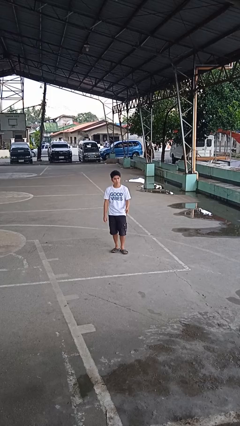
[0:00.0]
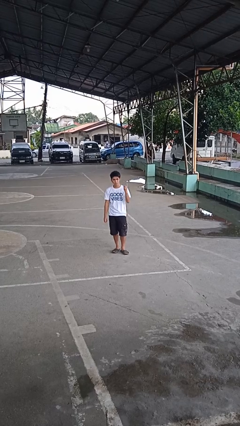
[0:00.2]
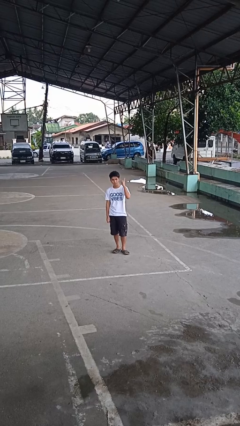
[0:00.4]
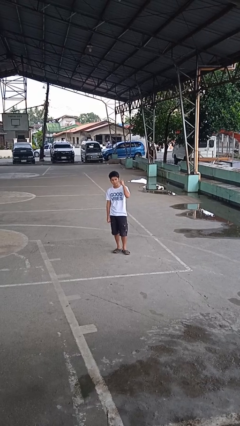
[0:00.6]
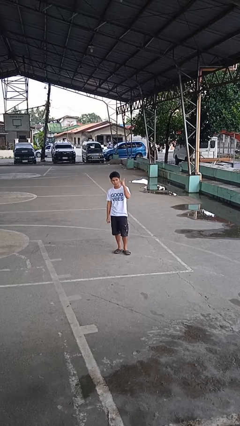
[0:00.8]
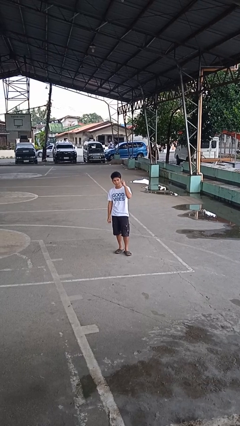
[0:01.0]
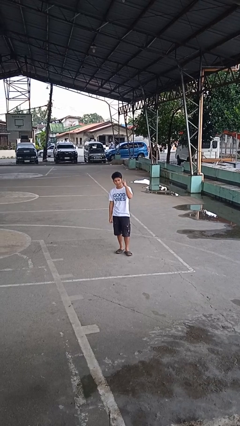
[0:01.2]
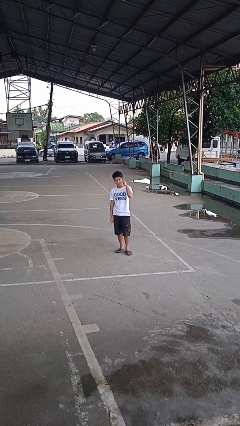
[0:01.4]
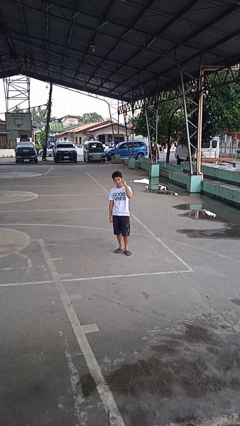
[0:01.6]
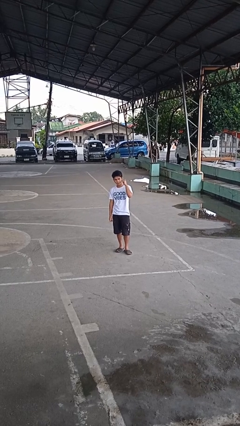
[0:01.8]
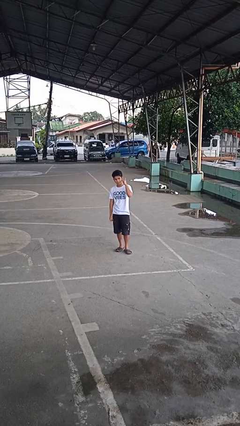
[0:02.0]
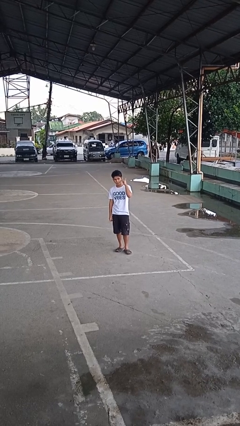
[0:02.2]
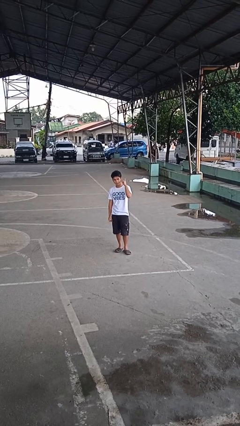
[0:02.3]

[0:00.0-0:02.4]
person gestures listen closely

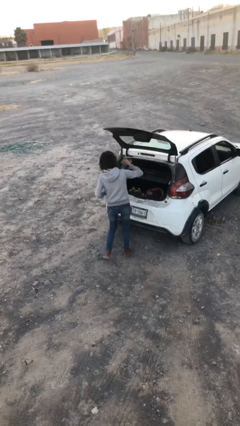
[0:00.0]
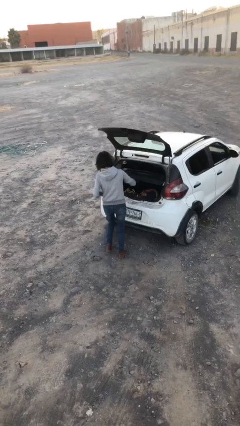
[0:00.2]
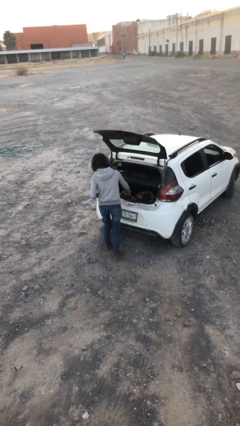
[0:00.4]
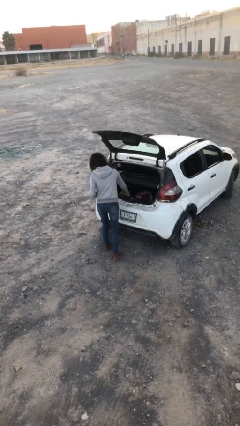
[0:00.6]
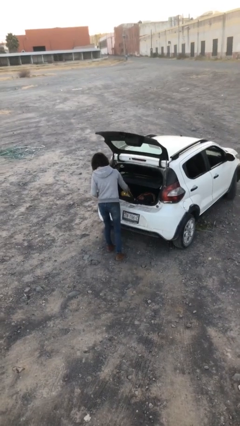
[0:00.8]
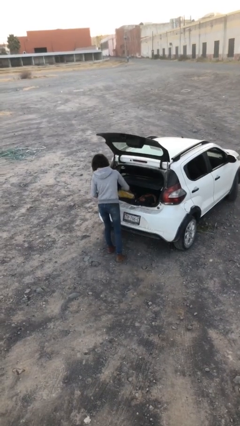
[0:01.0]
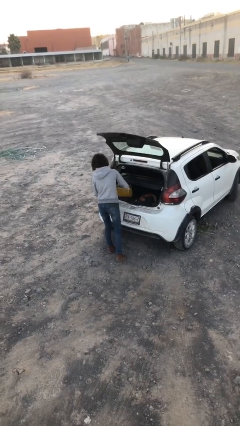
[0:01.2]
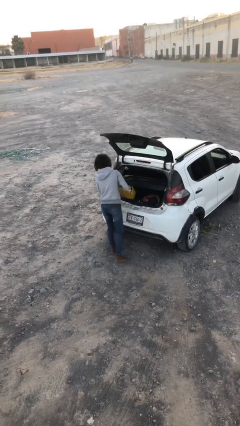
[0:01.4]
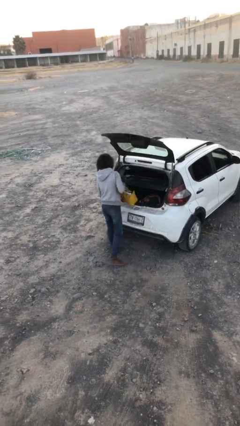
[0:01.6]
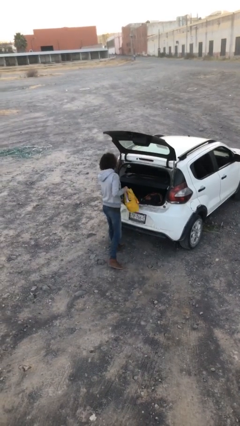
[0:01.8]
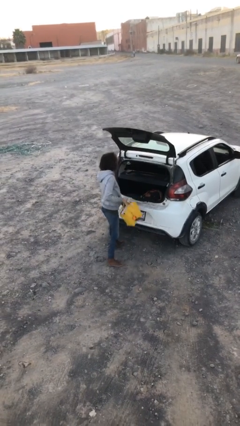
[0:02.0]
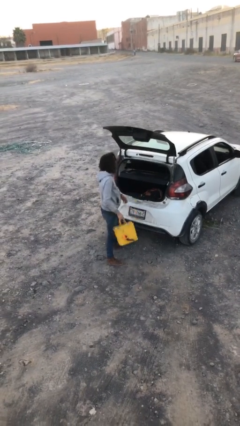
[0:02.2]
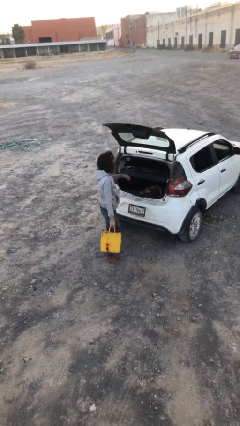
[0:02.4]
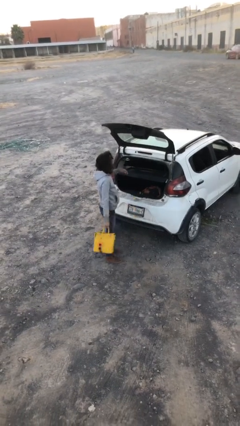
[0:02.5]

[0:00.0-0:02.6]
person unloads car

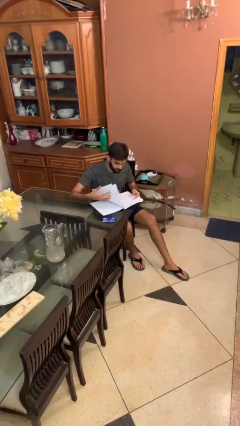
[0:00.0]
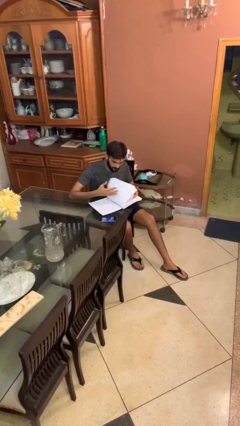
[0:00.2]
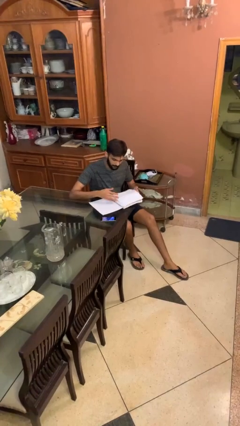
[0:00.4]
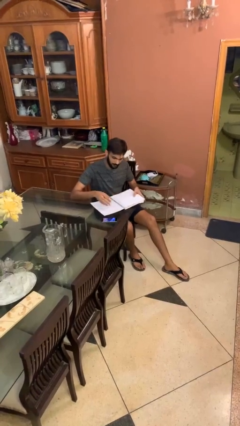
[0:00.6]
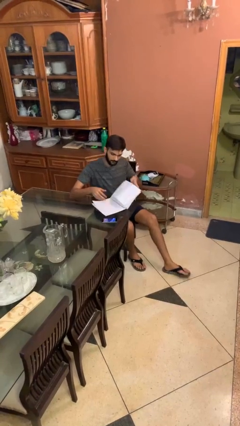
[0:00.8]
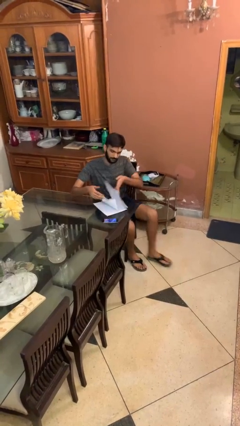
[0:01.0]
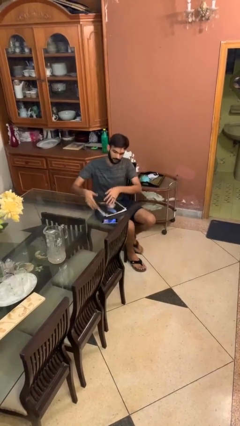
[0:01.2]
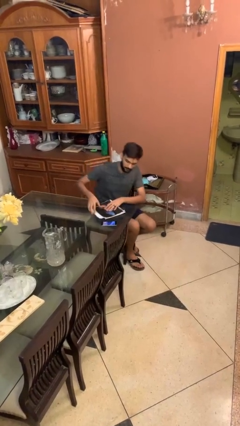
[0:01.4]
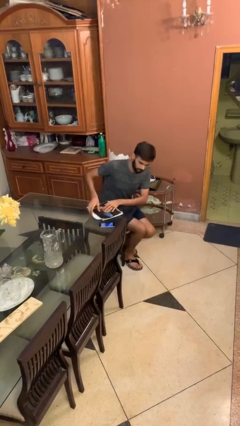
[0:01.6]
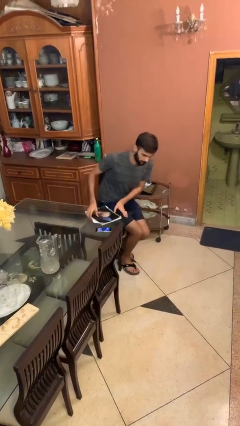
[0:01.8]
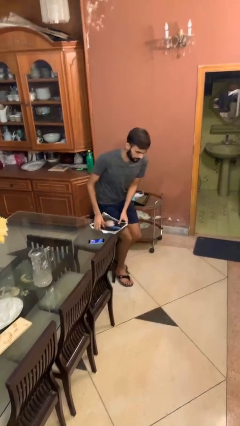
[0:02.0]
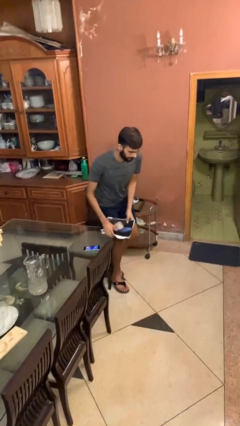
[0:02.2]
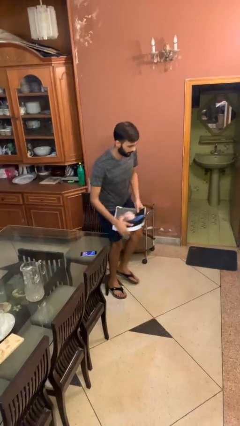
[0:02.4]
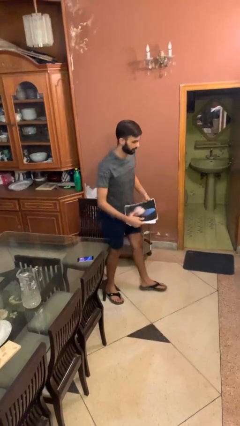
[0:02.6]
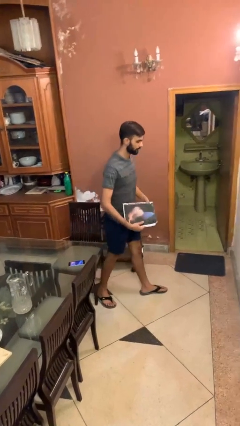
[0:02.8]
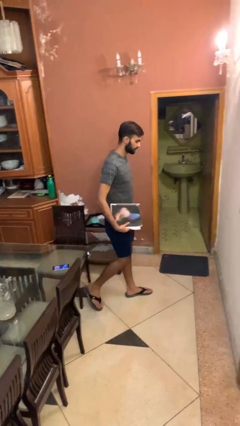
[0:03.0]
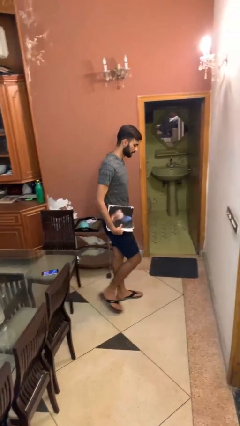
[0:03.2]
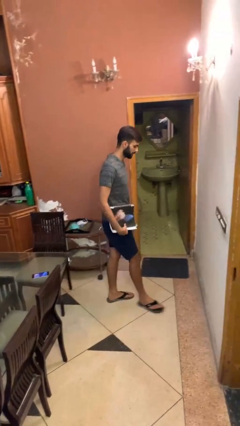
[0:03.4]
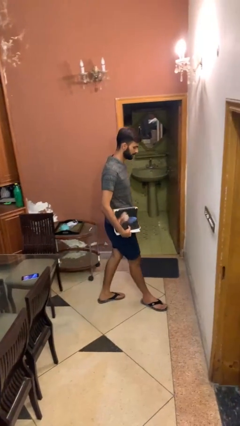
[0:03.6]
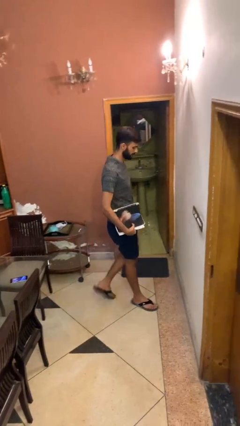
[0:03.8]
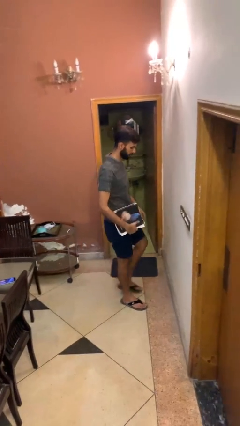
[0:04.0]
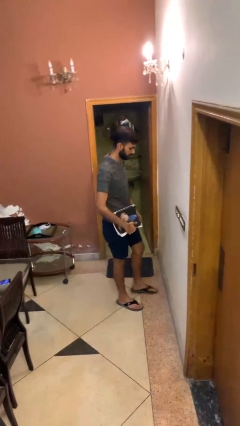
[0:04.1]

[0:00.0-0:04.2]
person stands up

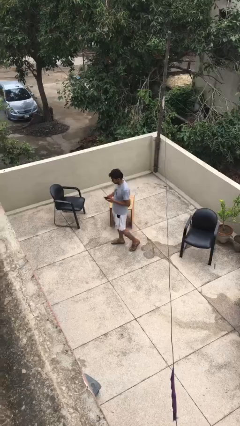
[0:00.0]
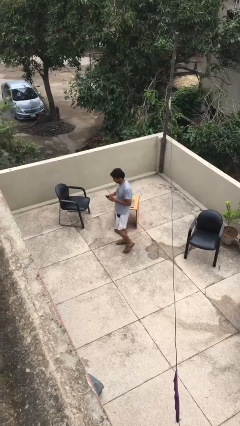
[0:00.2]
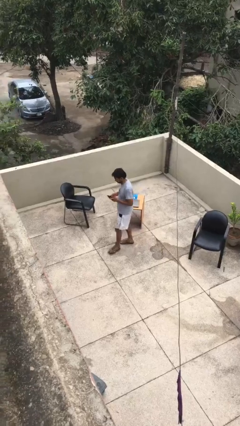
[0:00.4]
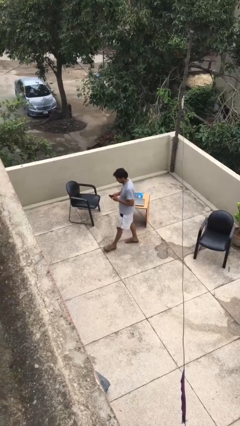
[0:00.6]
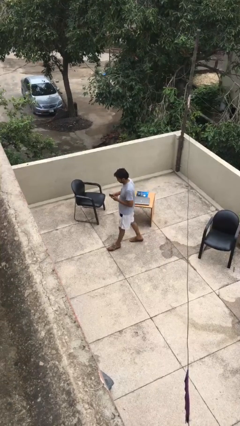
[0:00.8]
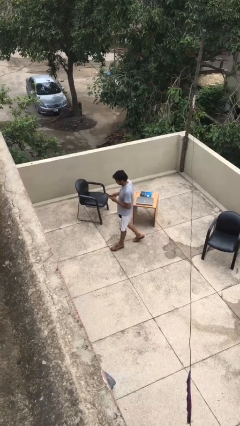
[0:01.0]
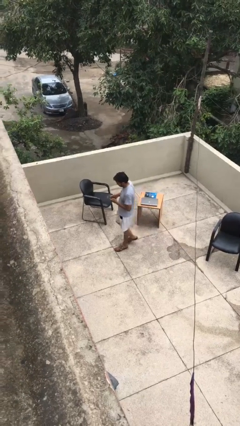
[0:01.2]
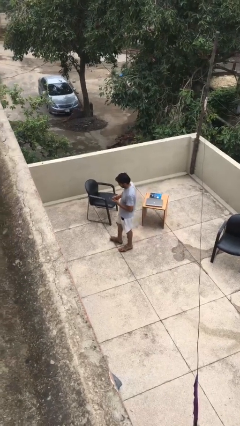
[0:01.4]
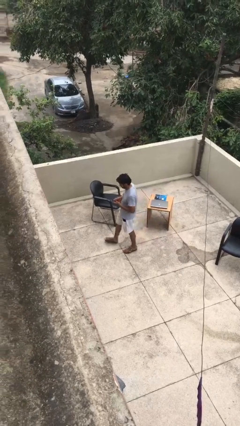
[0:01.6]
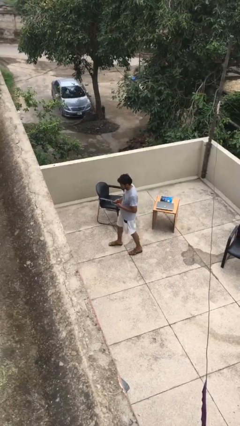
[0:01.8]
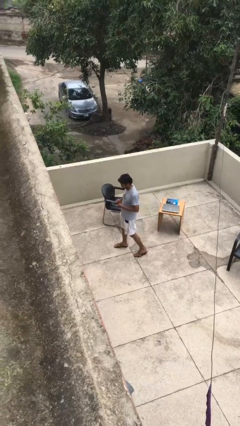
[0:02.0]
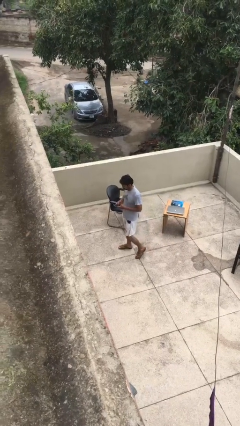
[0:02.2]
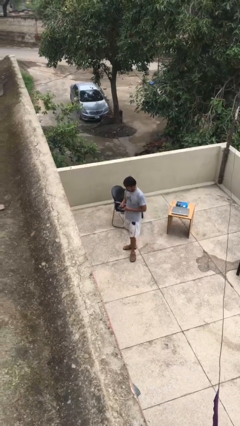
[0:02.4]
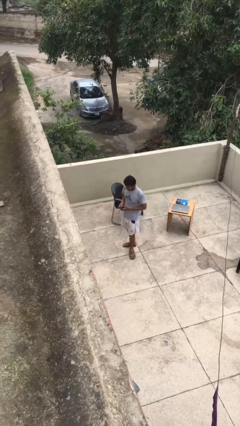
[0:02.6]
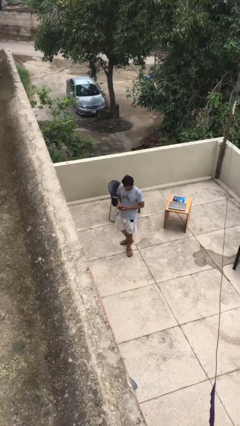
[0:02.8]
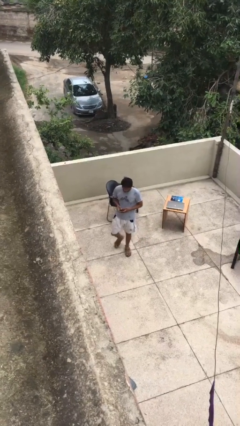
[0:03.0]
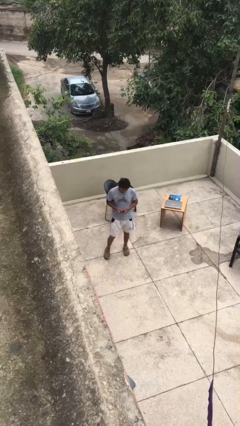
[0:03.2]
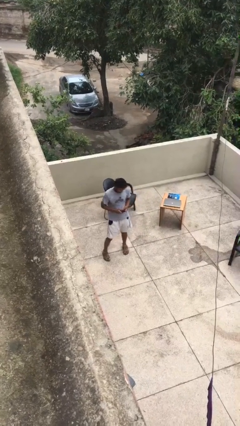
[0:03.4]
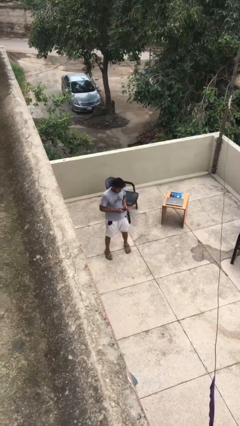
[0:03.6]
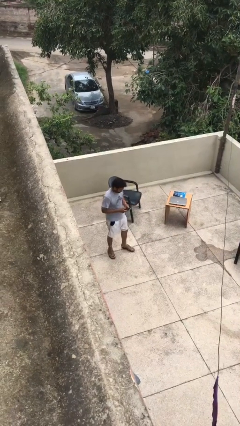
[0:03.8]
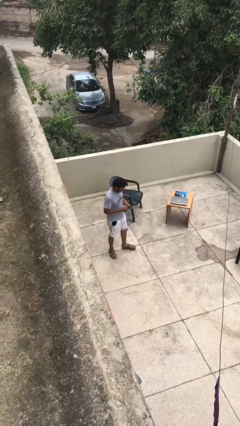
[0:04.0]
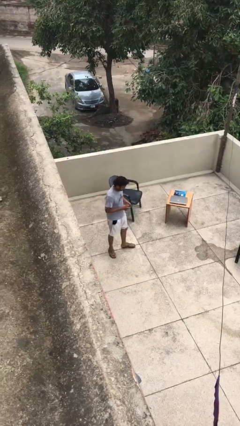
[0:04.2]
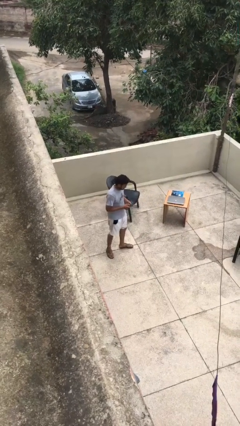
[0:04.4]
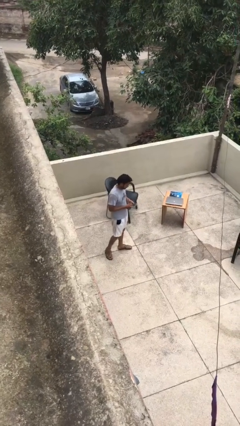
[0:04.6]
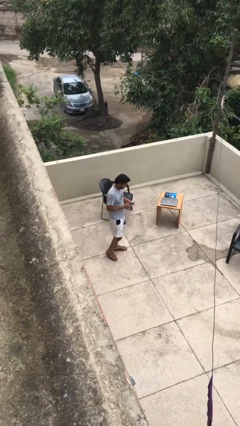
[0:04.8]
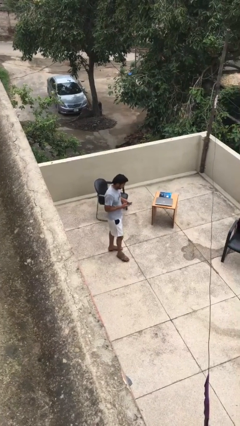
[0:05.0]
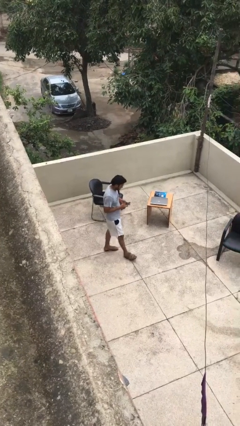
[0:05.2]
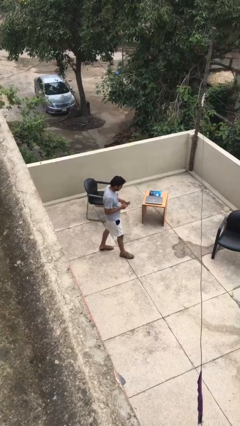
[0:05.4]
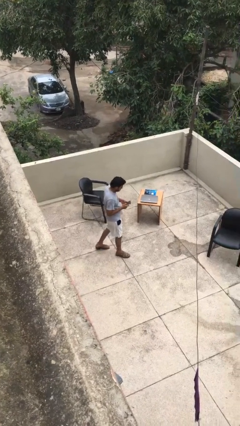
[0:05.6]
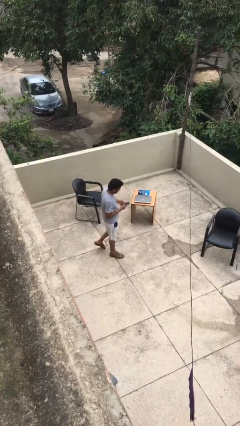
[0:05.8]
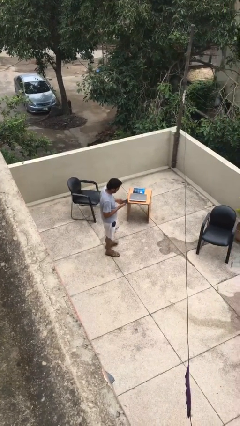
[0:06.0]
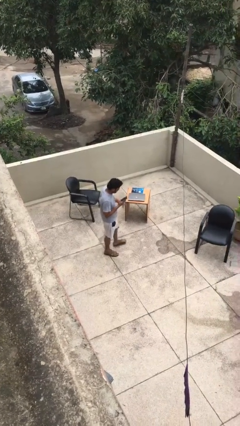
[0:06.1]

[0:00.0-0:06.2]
person texts on phone

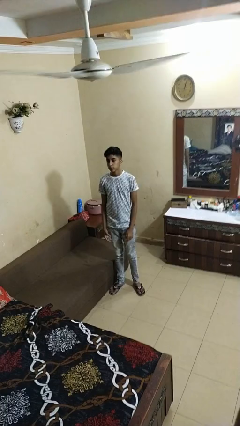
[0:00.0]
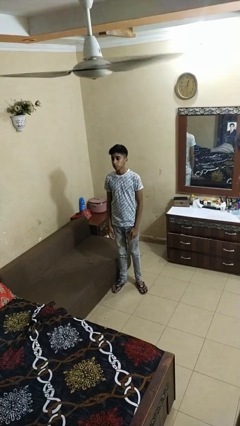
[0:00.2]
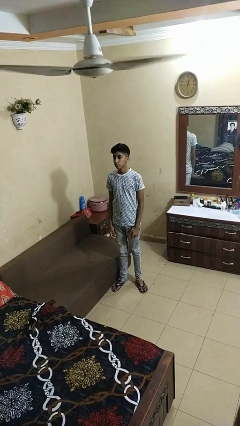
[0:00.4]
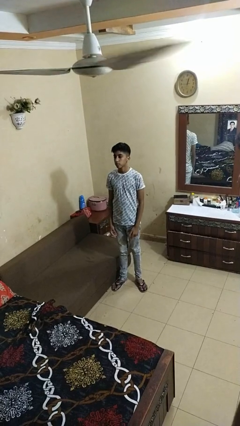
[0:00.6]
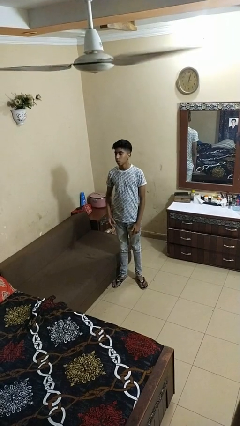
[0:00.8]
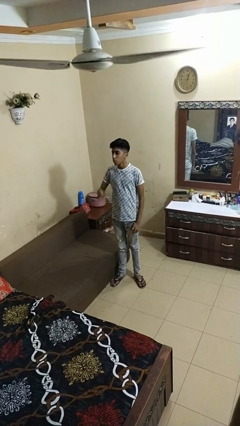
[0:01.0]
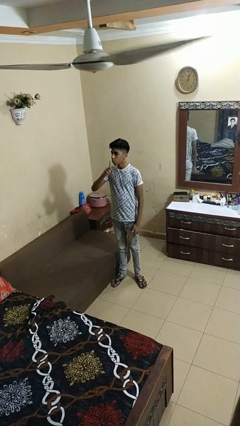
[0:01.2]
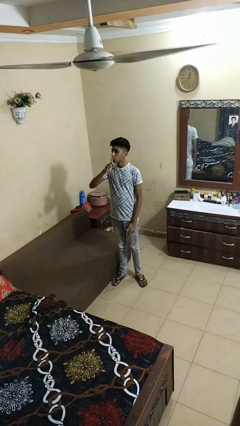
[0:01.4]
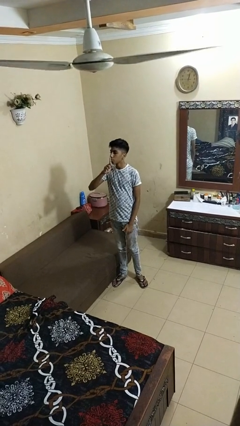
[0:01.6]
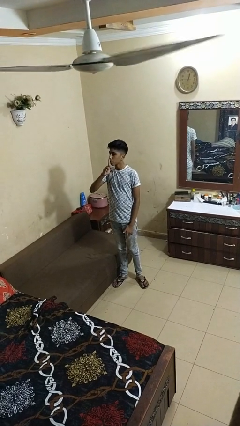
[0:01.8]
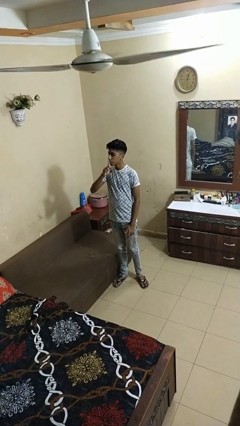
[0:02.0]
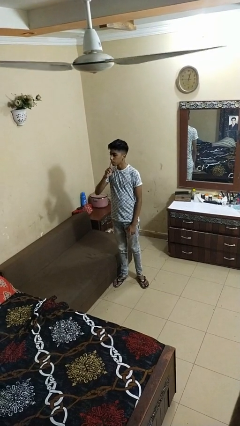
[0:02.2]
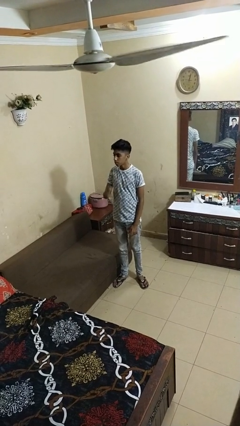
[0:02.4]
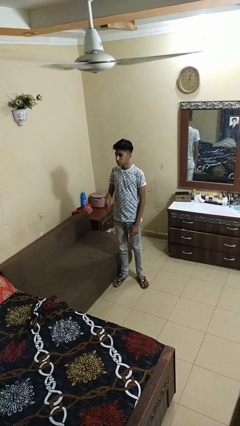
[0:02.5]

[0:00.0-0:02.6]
person gestures be quiet
